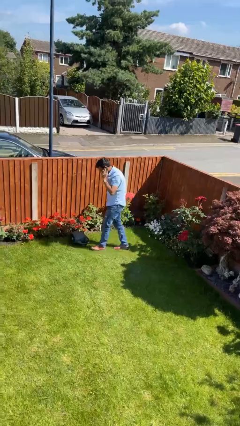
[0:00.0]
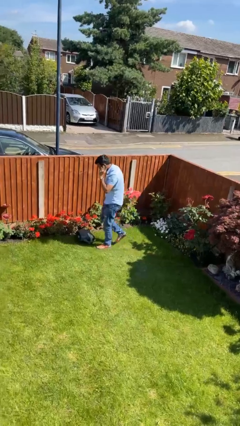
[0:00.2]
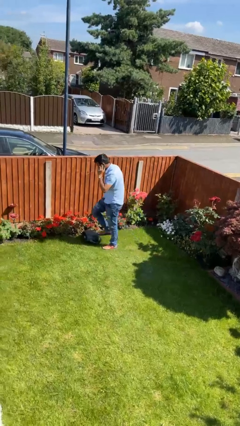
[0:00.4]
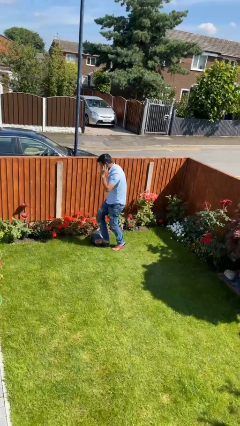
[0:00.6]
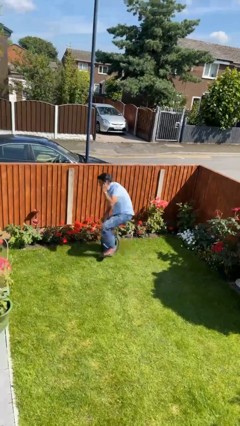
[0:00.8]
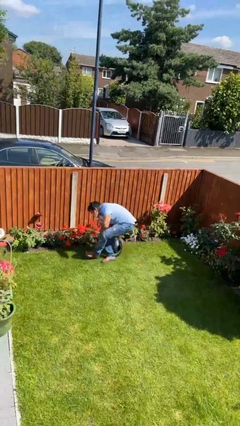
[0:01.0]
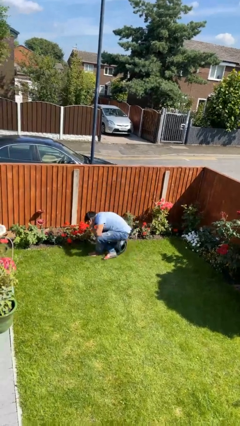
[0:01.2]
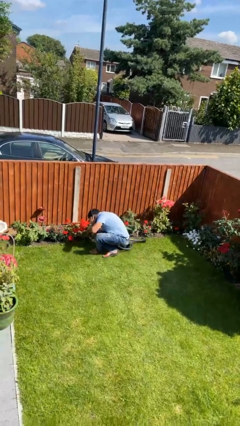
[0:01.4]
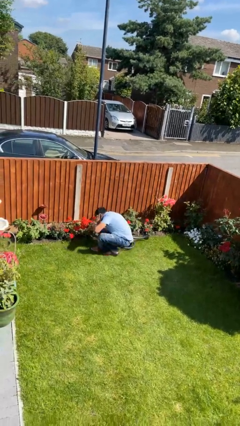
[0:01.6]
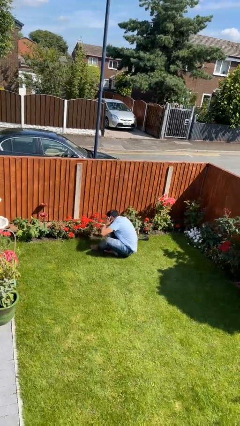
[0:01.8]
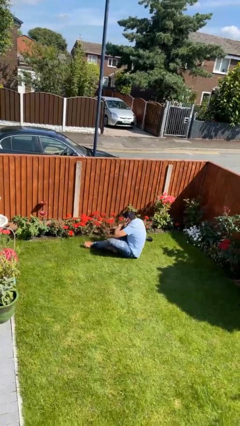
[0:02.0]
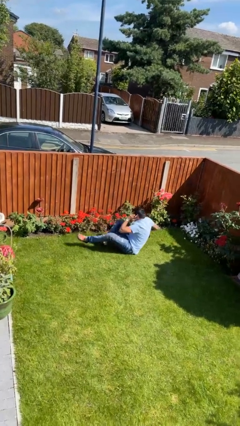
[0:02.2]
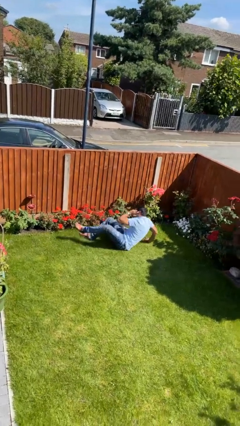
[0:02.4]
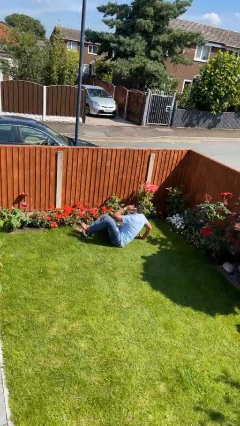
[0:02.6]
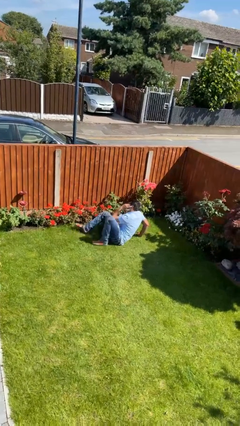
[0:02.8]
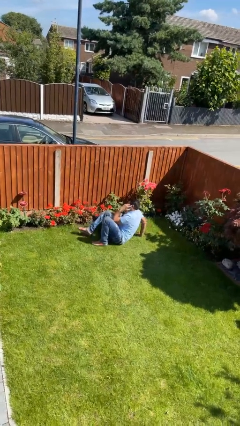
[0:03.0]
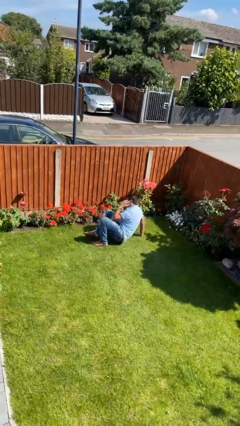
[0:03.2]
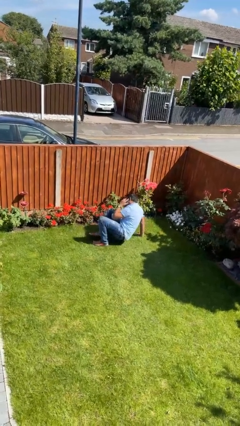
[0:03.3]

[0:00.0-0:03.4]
person trips on object on floor

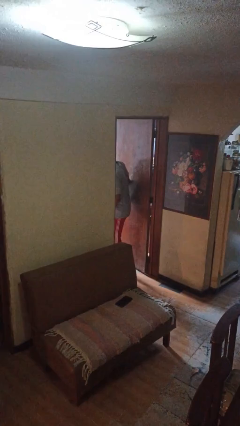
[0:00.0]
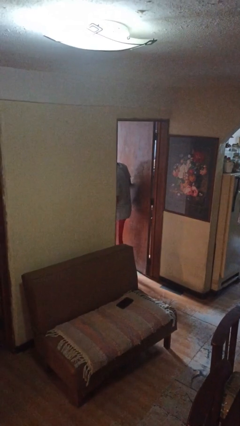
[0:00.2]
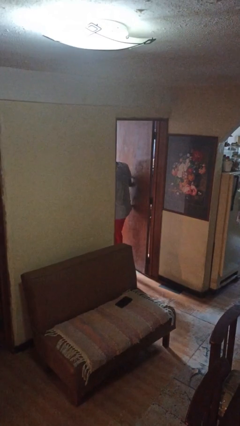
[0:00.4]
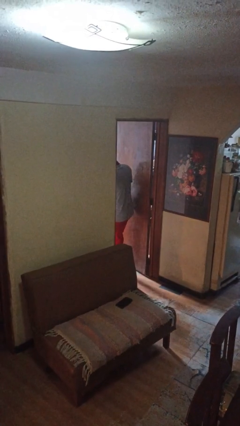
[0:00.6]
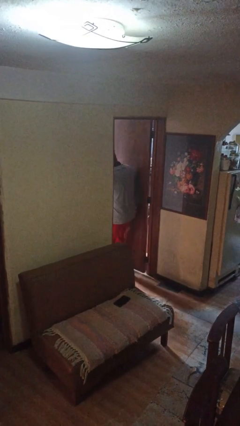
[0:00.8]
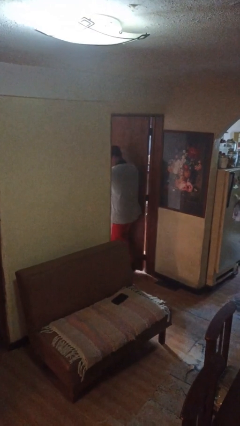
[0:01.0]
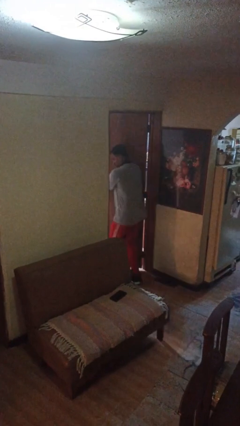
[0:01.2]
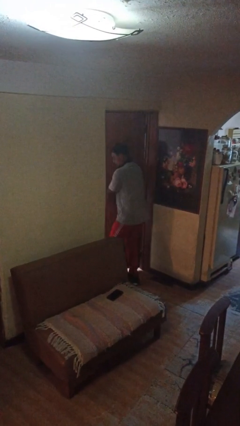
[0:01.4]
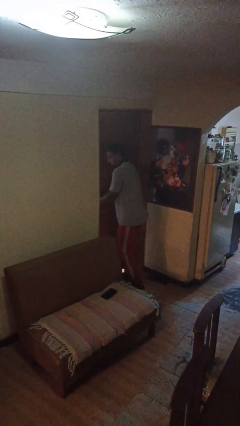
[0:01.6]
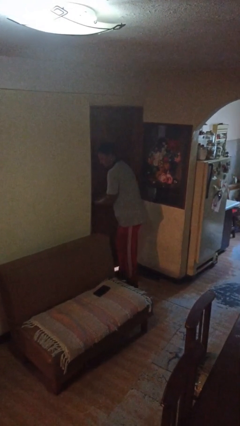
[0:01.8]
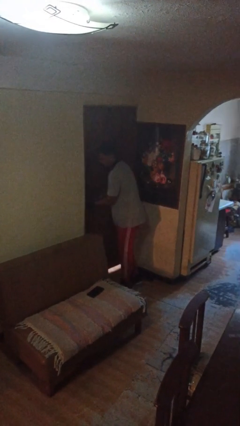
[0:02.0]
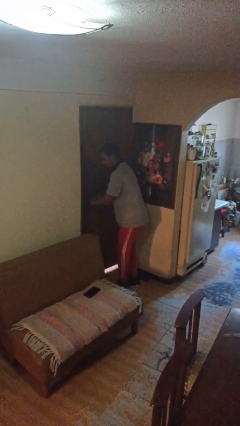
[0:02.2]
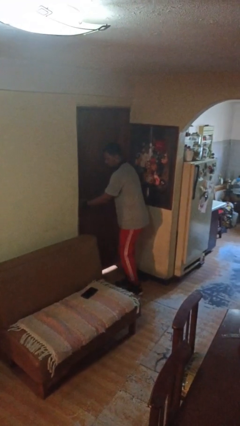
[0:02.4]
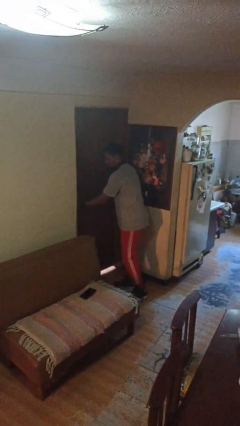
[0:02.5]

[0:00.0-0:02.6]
person closes facility door

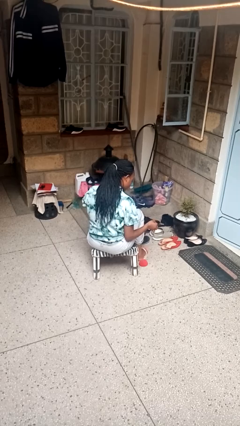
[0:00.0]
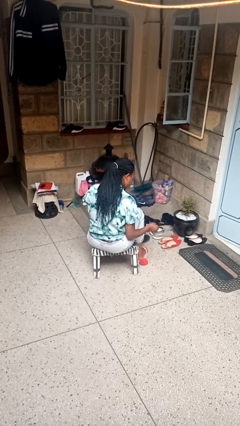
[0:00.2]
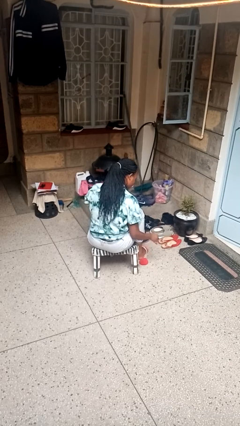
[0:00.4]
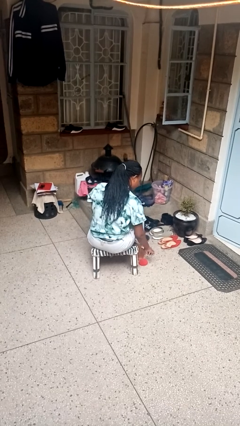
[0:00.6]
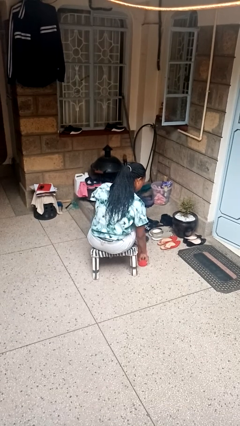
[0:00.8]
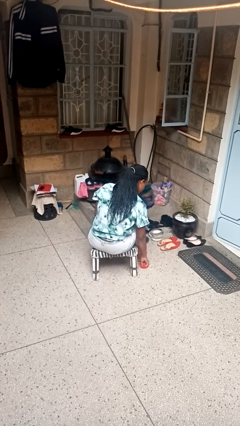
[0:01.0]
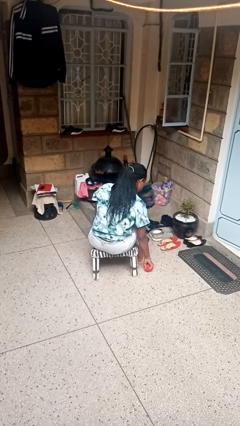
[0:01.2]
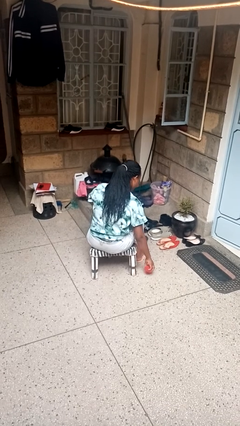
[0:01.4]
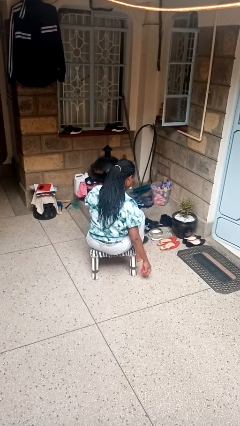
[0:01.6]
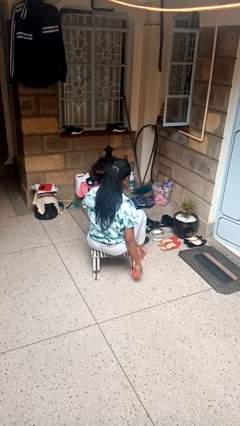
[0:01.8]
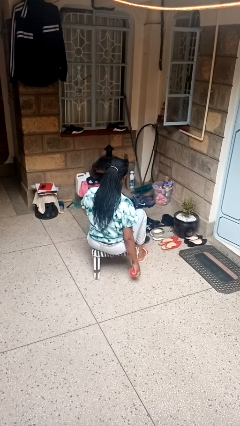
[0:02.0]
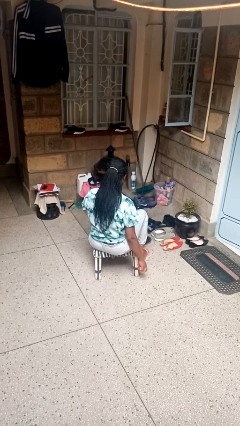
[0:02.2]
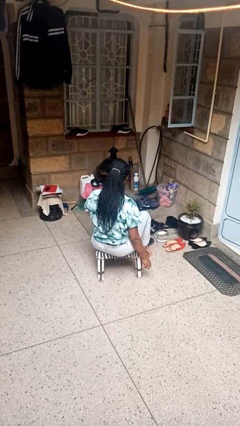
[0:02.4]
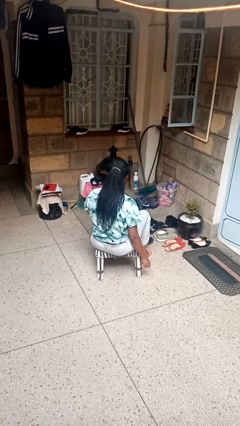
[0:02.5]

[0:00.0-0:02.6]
person picks up object from floor

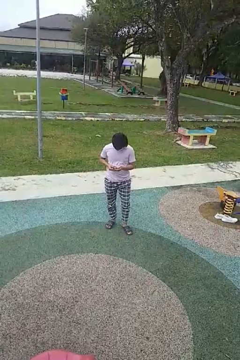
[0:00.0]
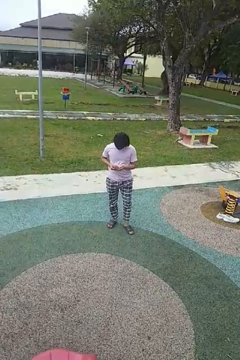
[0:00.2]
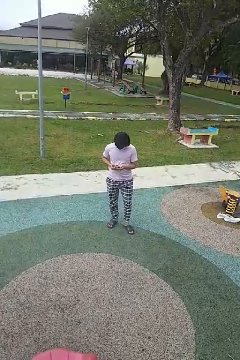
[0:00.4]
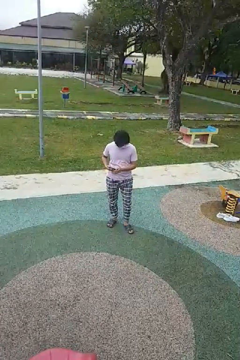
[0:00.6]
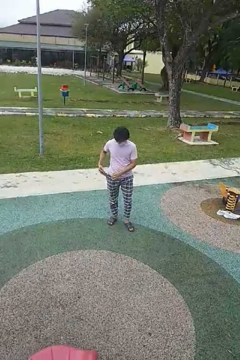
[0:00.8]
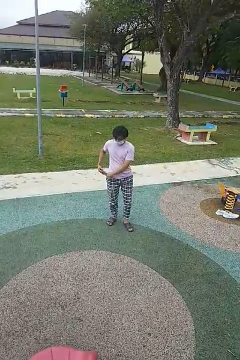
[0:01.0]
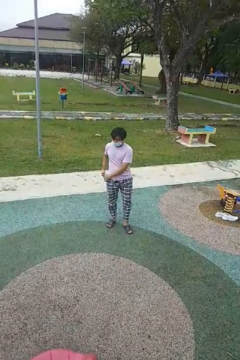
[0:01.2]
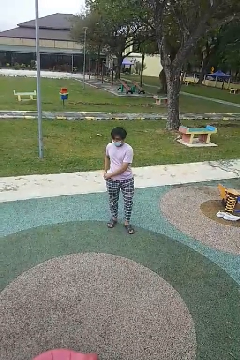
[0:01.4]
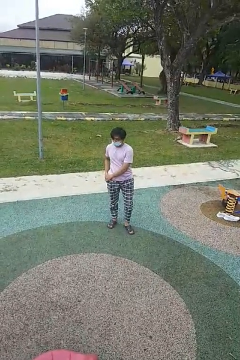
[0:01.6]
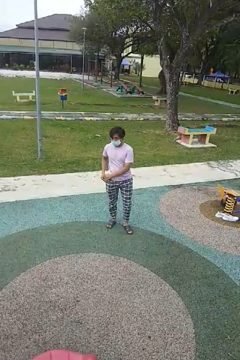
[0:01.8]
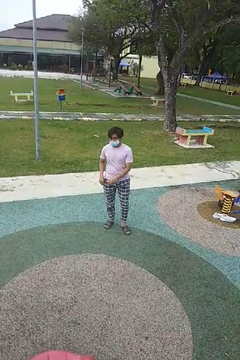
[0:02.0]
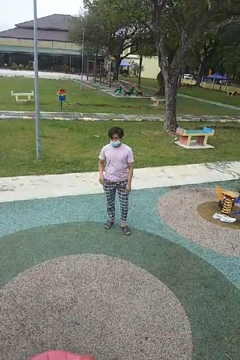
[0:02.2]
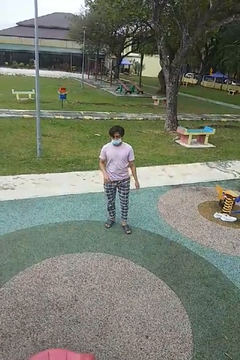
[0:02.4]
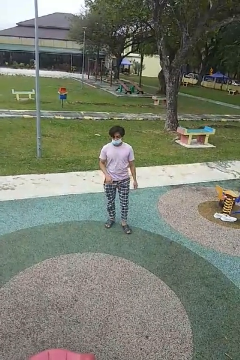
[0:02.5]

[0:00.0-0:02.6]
person puts phone into pocket

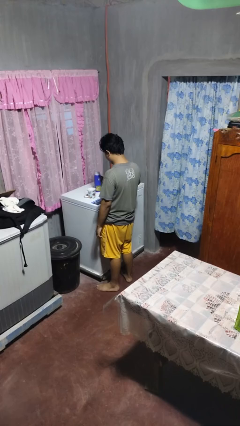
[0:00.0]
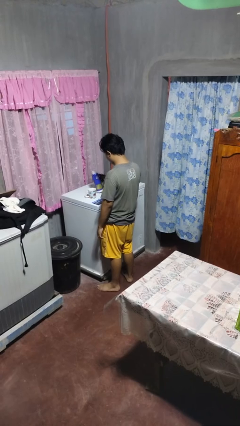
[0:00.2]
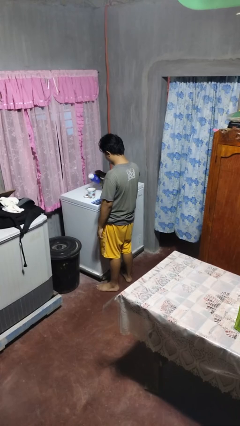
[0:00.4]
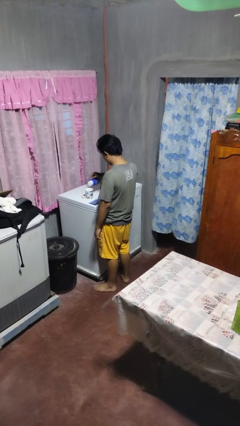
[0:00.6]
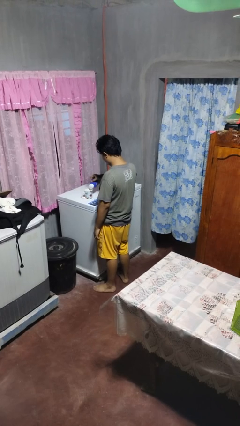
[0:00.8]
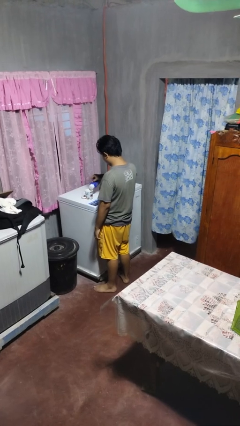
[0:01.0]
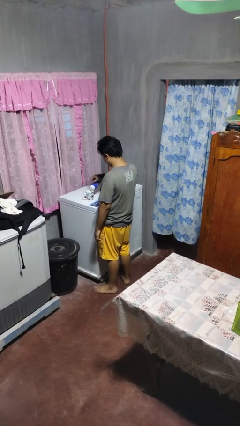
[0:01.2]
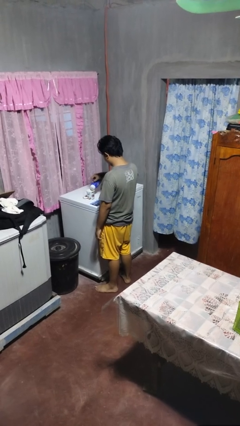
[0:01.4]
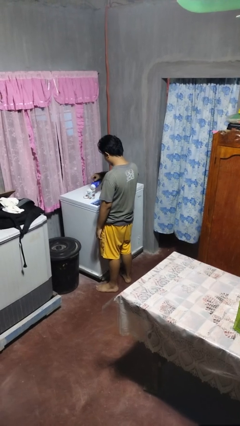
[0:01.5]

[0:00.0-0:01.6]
person pours coffee into mug

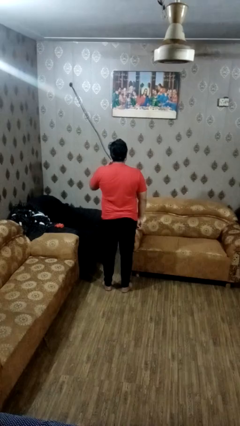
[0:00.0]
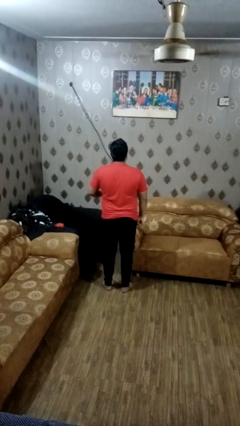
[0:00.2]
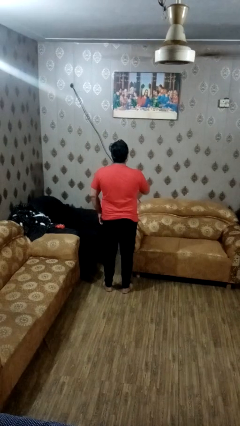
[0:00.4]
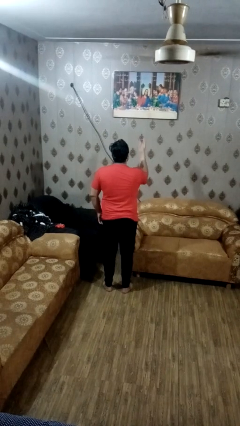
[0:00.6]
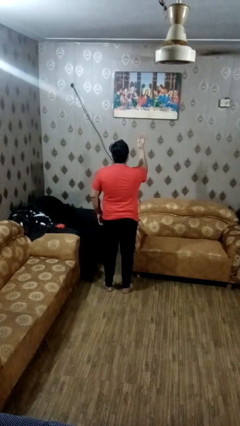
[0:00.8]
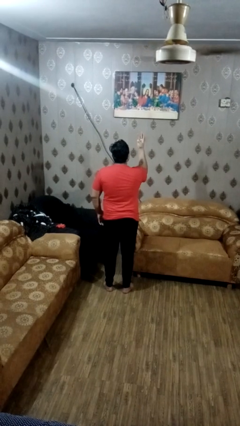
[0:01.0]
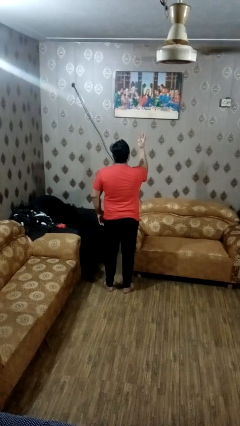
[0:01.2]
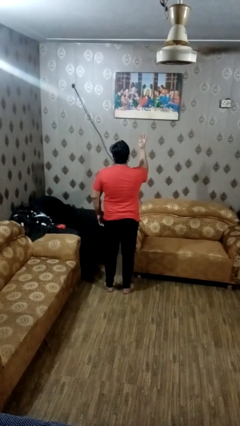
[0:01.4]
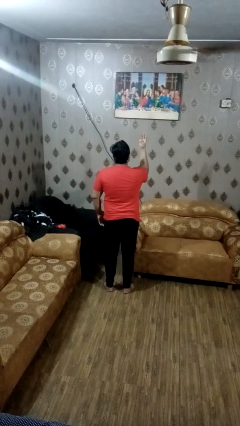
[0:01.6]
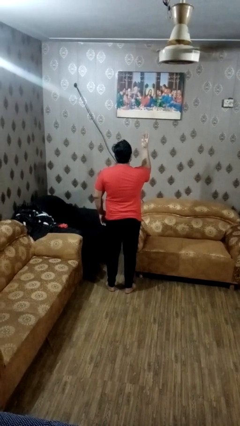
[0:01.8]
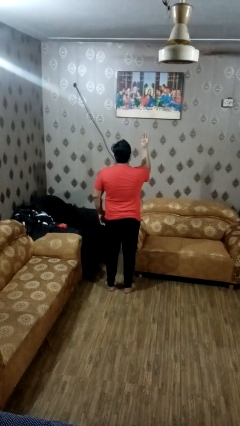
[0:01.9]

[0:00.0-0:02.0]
person gestures number three

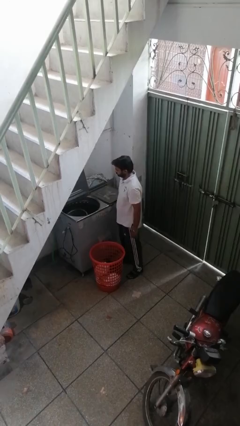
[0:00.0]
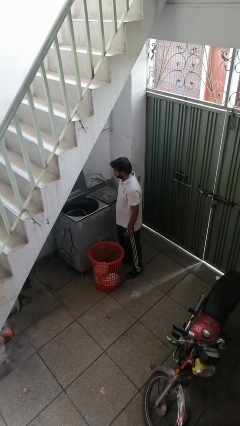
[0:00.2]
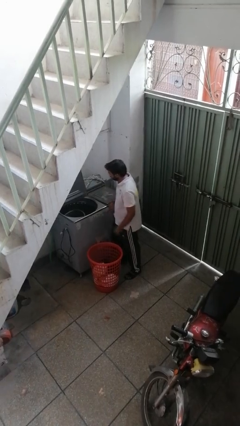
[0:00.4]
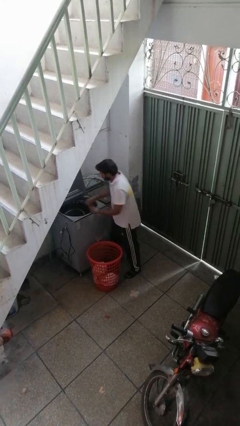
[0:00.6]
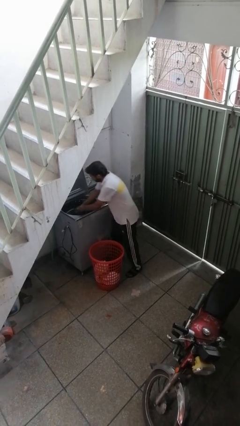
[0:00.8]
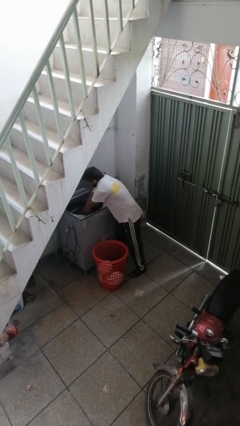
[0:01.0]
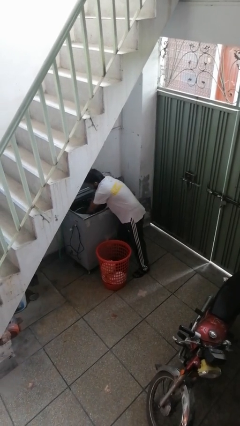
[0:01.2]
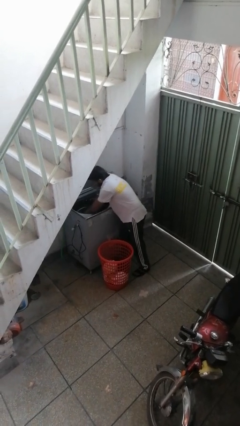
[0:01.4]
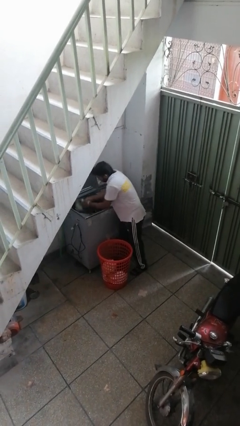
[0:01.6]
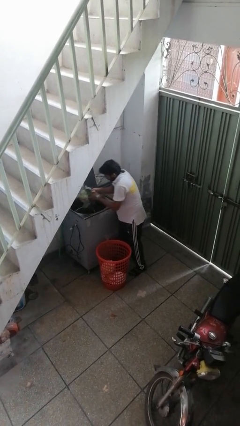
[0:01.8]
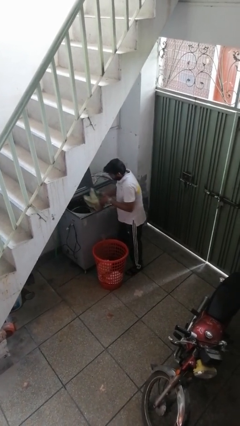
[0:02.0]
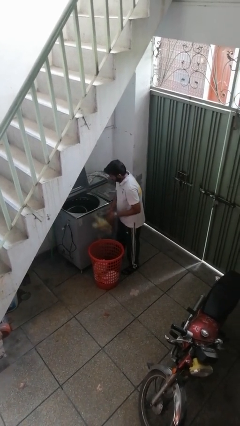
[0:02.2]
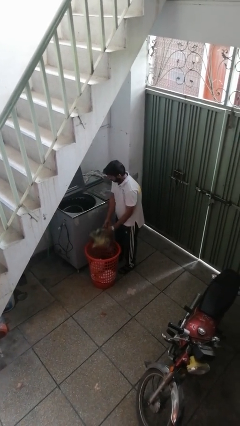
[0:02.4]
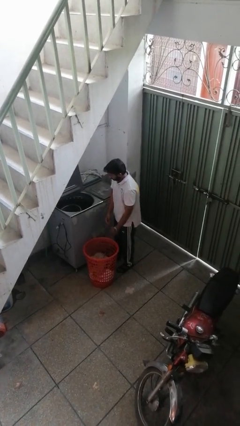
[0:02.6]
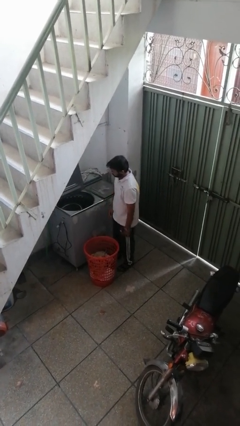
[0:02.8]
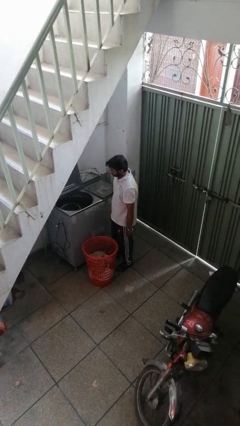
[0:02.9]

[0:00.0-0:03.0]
person loads clotheswasher
